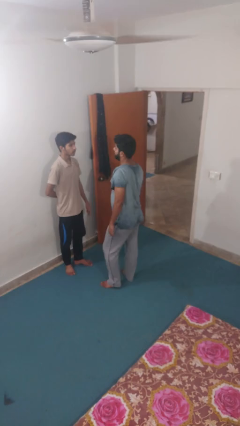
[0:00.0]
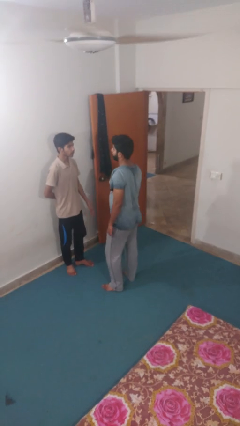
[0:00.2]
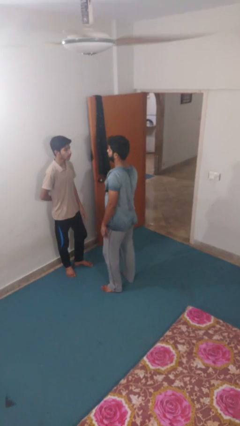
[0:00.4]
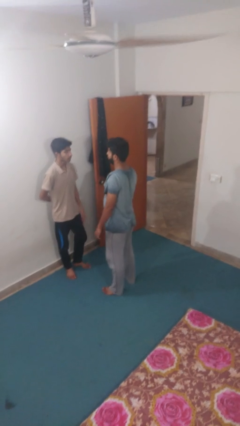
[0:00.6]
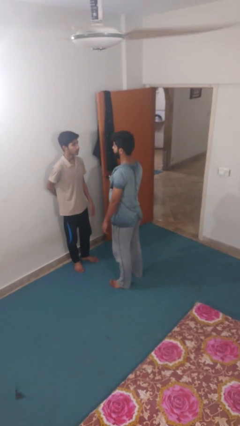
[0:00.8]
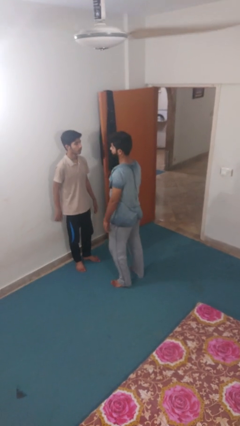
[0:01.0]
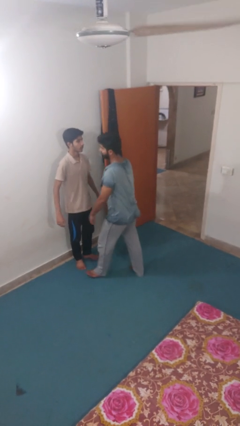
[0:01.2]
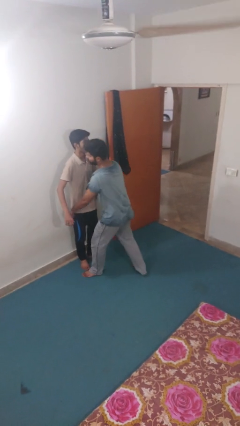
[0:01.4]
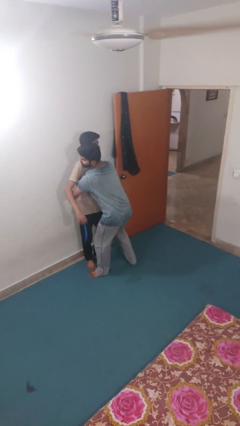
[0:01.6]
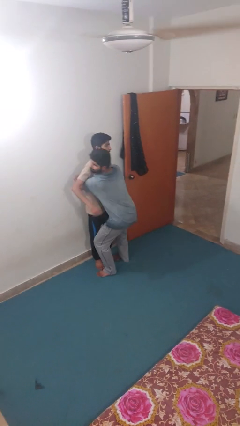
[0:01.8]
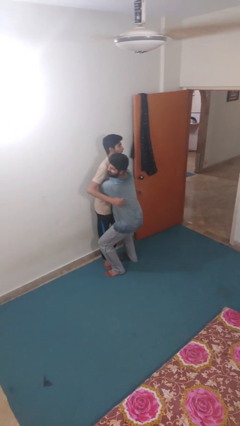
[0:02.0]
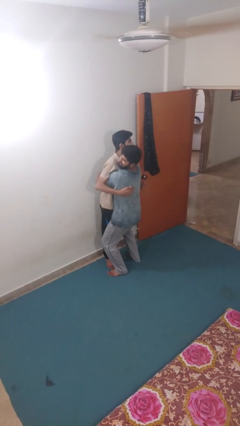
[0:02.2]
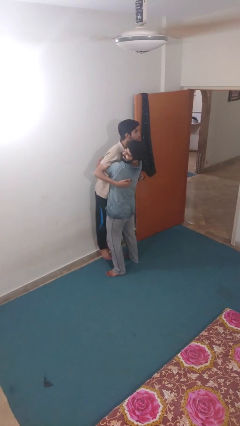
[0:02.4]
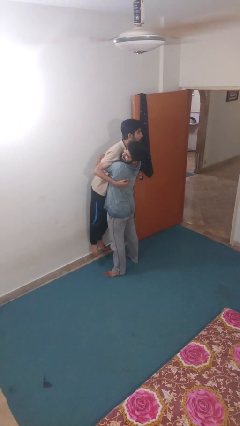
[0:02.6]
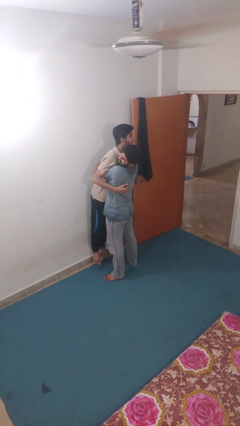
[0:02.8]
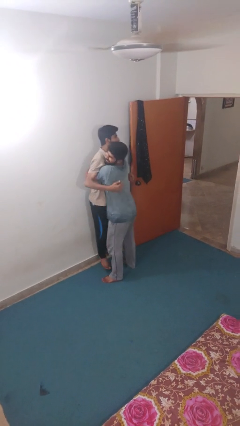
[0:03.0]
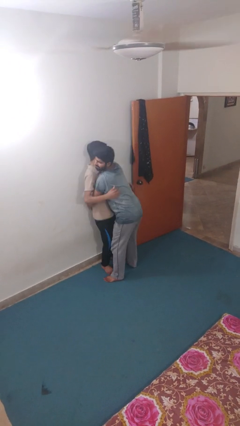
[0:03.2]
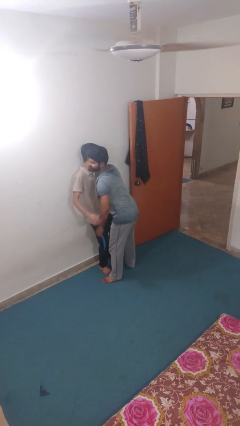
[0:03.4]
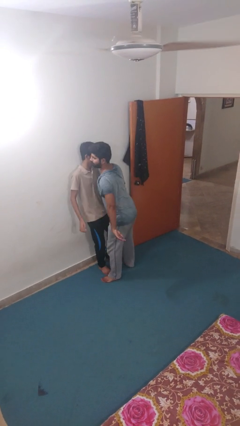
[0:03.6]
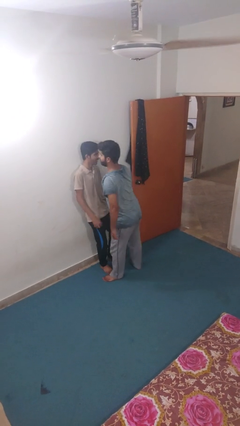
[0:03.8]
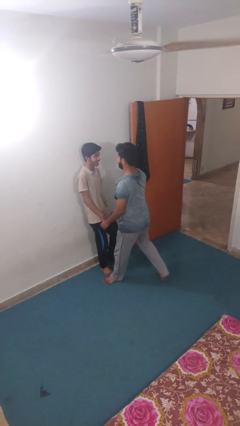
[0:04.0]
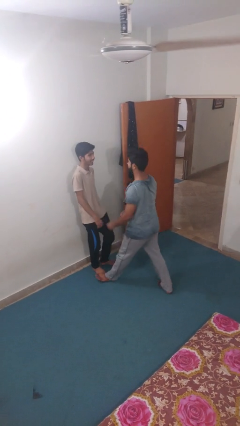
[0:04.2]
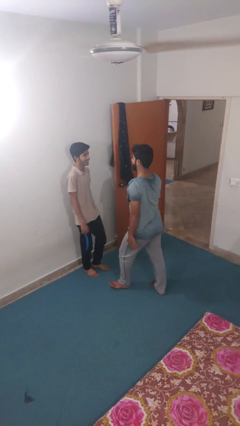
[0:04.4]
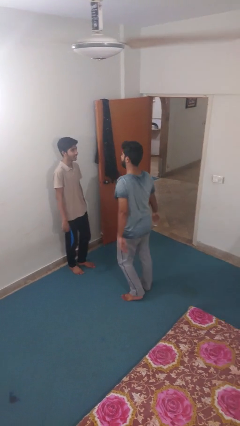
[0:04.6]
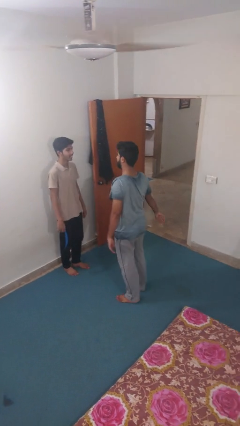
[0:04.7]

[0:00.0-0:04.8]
person picks up person

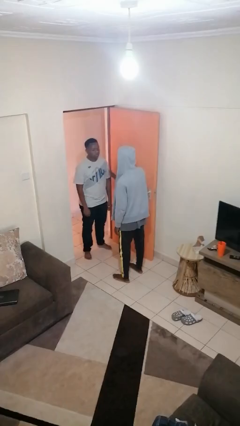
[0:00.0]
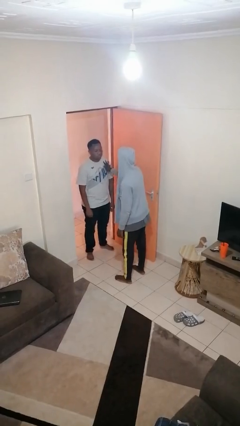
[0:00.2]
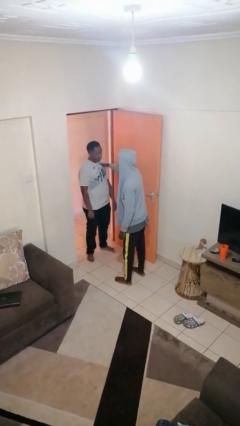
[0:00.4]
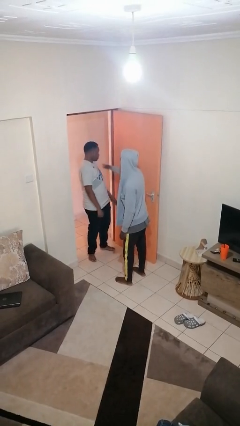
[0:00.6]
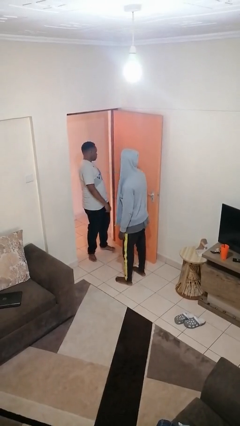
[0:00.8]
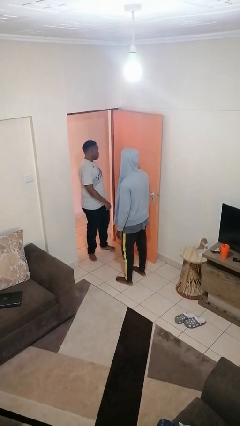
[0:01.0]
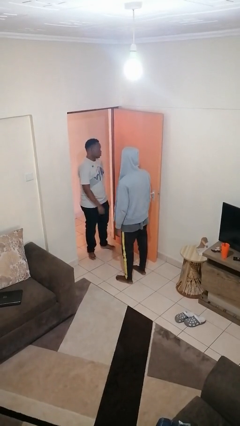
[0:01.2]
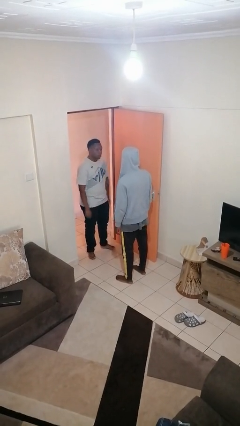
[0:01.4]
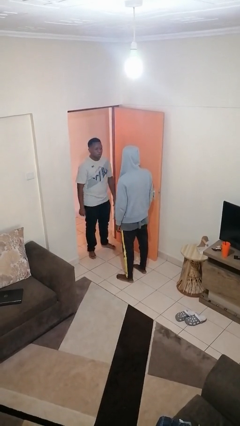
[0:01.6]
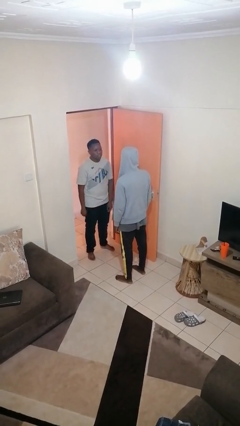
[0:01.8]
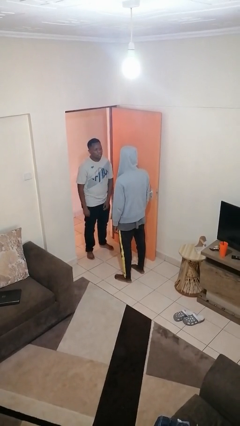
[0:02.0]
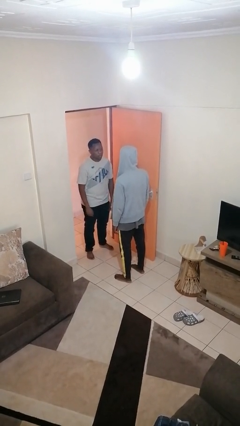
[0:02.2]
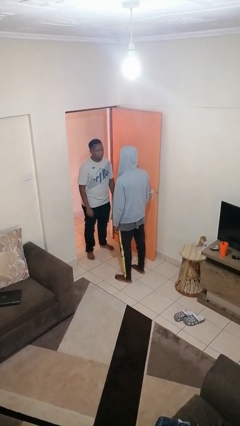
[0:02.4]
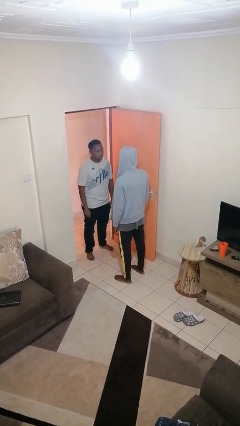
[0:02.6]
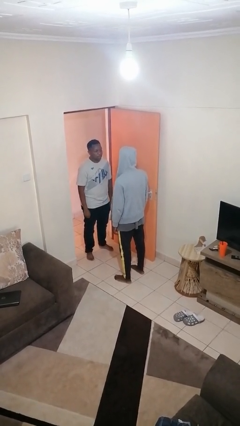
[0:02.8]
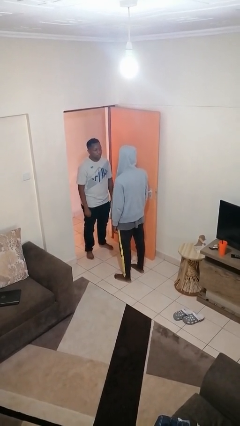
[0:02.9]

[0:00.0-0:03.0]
person shoves person

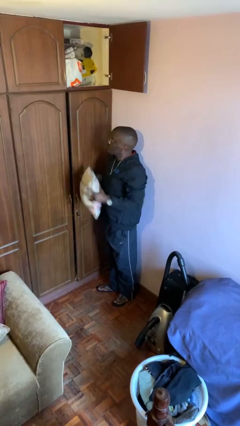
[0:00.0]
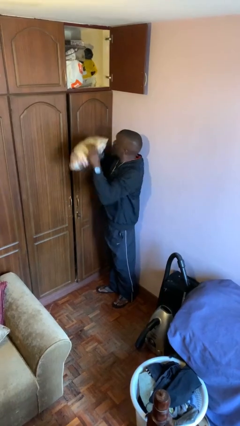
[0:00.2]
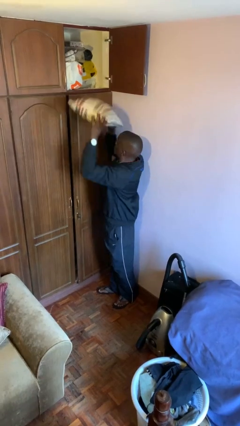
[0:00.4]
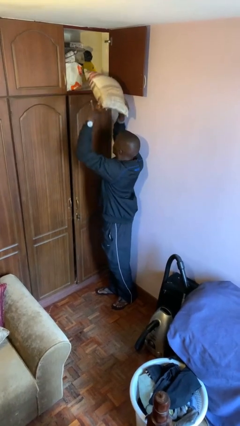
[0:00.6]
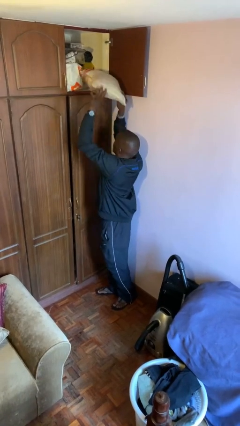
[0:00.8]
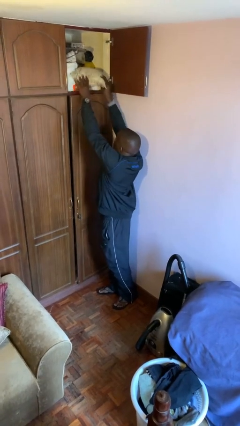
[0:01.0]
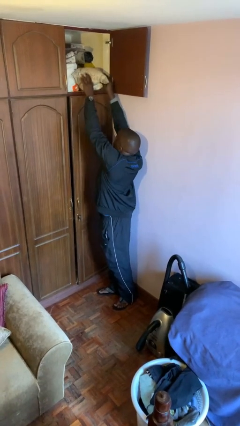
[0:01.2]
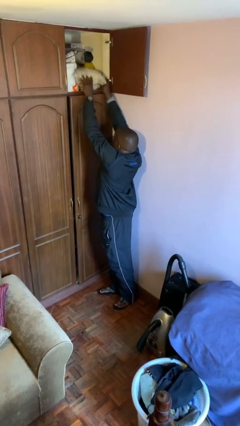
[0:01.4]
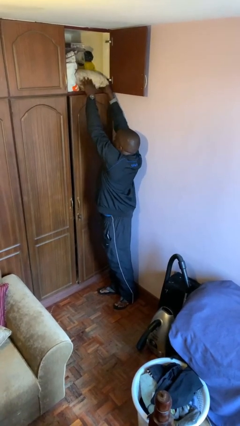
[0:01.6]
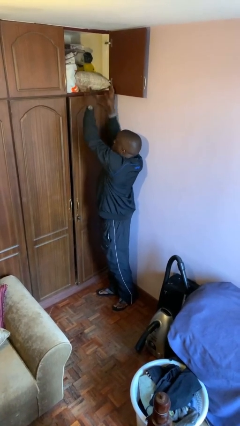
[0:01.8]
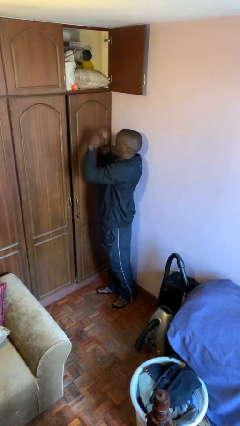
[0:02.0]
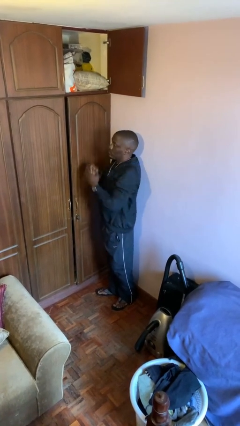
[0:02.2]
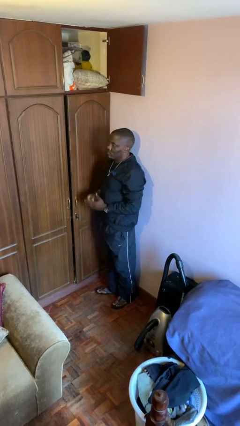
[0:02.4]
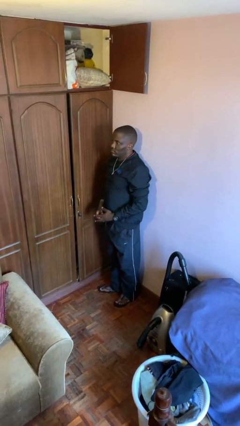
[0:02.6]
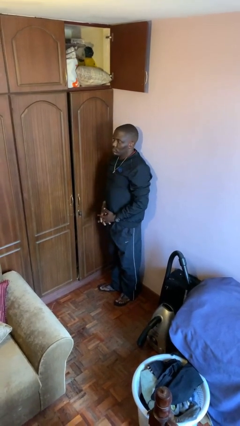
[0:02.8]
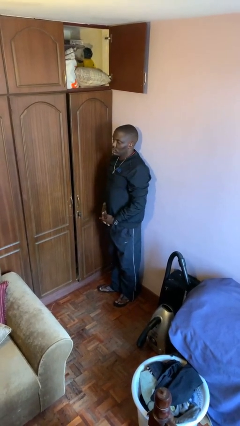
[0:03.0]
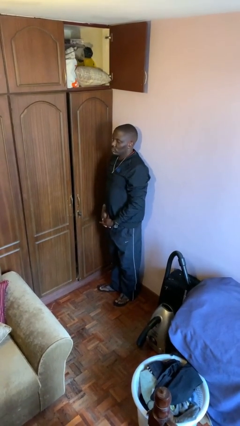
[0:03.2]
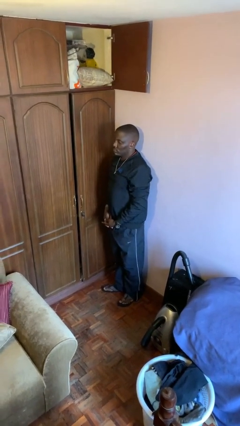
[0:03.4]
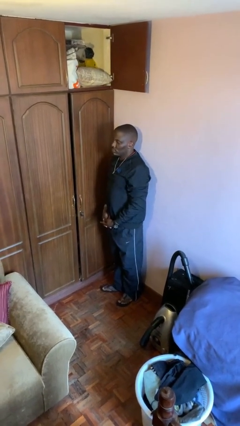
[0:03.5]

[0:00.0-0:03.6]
person puts down object on shelf

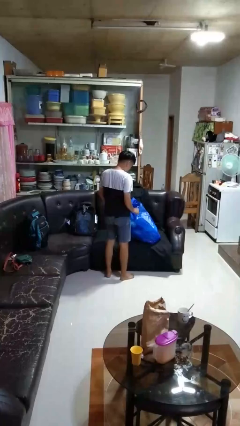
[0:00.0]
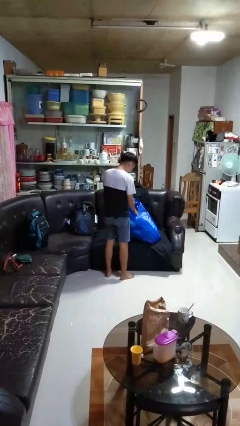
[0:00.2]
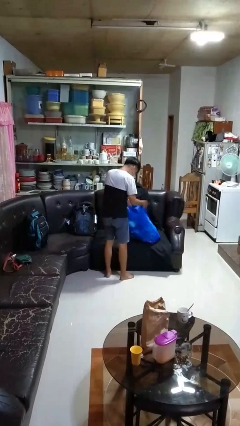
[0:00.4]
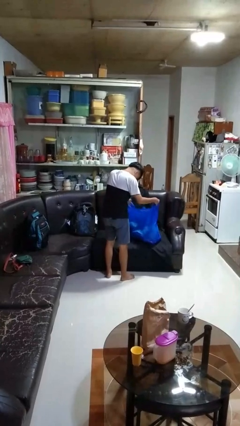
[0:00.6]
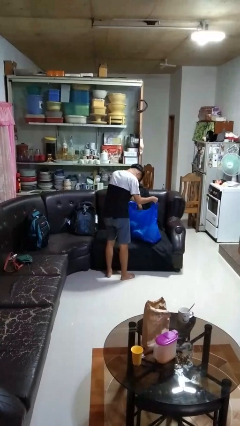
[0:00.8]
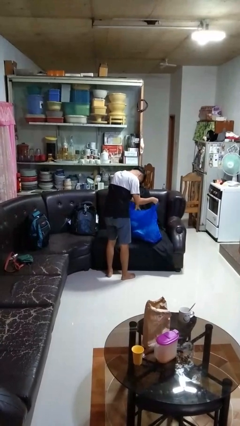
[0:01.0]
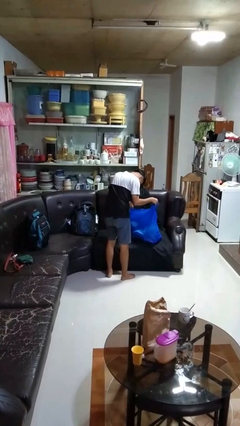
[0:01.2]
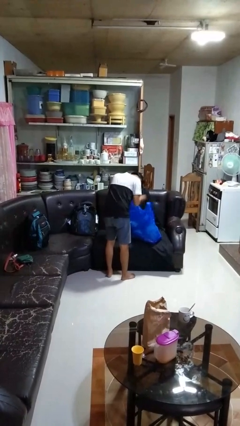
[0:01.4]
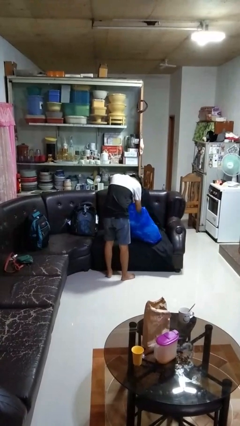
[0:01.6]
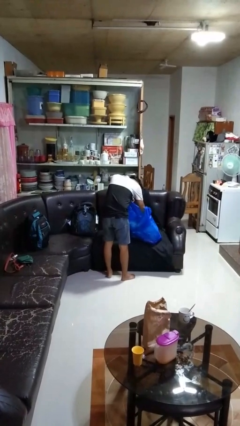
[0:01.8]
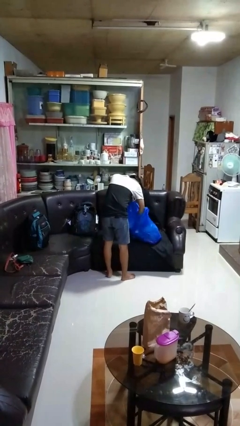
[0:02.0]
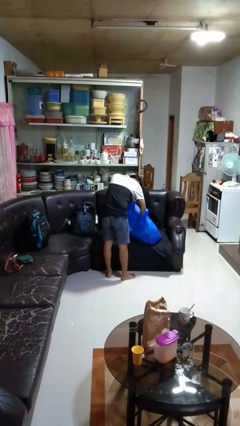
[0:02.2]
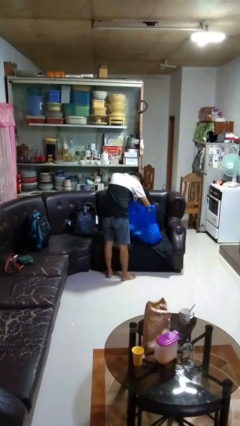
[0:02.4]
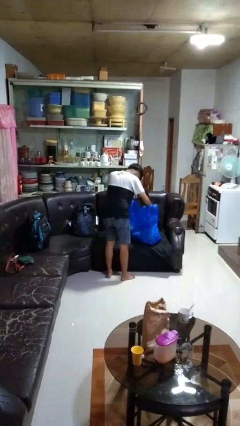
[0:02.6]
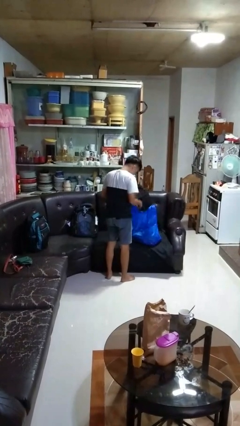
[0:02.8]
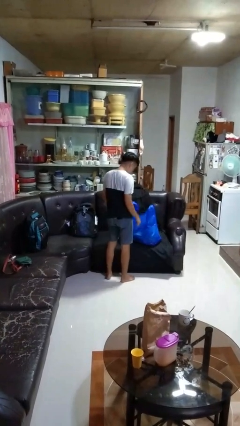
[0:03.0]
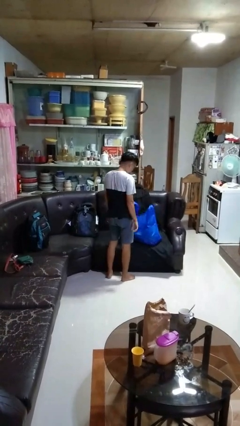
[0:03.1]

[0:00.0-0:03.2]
person searches in bag

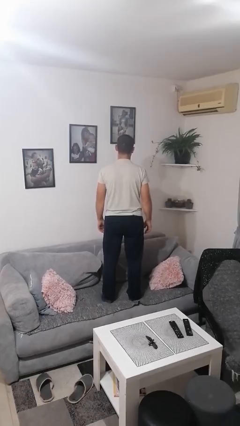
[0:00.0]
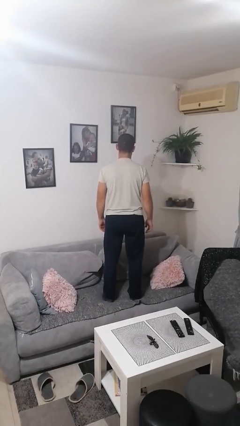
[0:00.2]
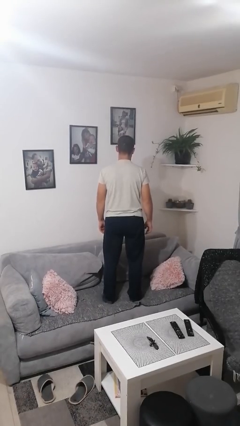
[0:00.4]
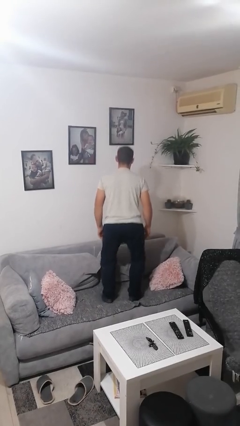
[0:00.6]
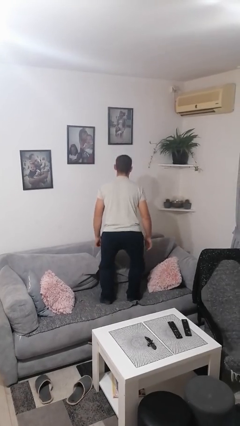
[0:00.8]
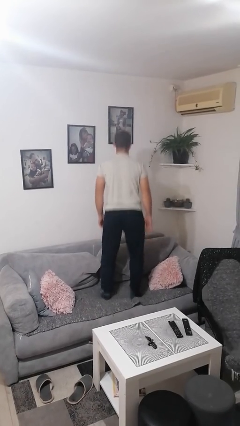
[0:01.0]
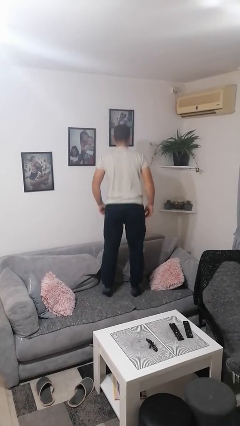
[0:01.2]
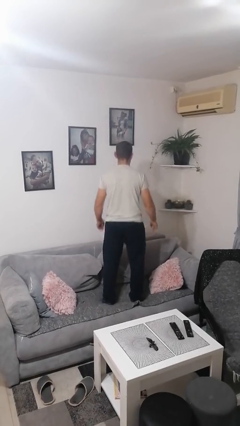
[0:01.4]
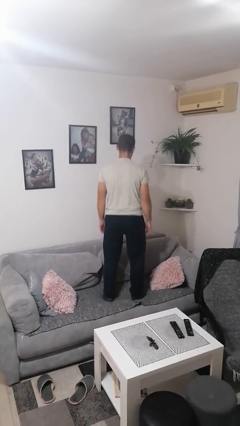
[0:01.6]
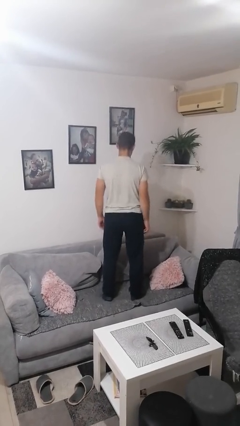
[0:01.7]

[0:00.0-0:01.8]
person jumps on couch

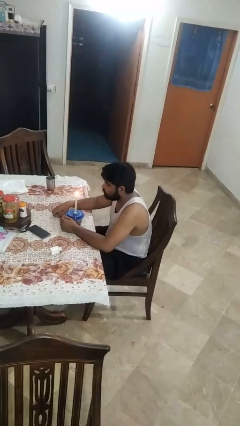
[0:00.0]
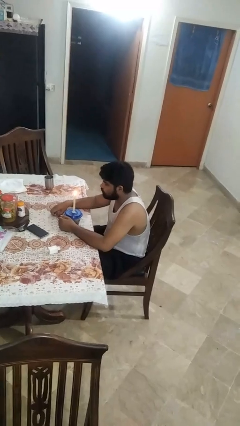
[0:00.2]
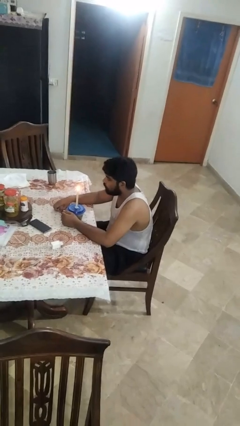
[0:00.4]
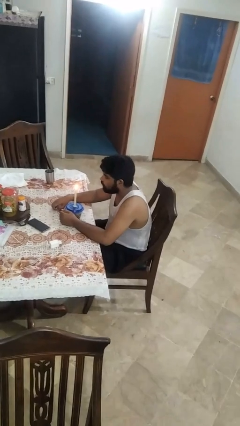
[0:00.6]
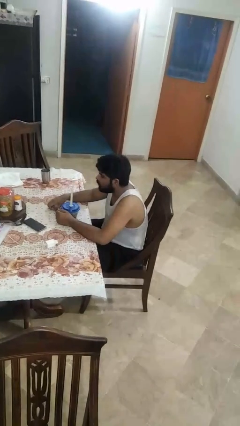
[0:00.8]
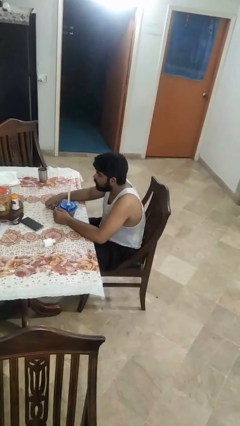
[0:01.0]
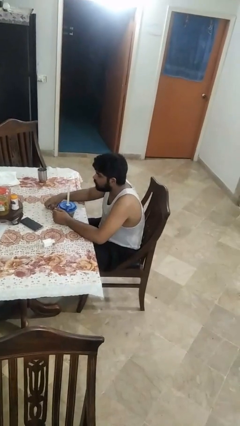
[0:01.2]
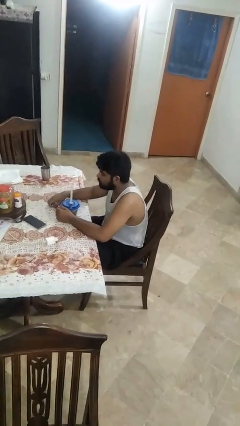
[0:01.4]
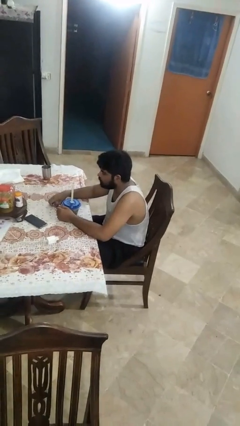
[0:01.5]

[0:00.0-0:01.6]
person extinguishes candle
